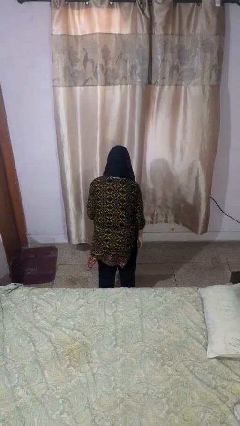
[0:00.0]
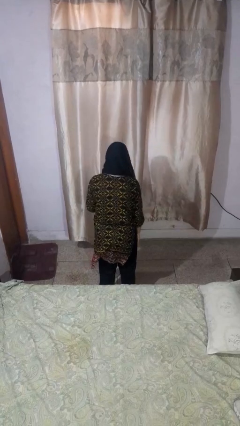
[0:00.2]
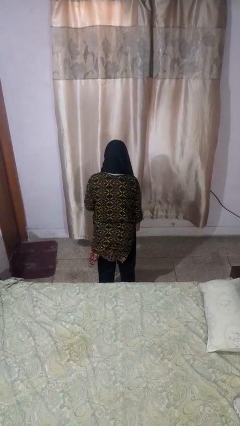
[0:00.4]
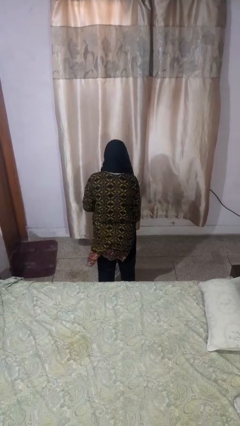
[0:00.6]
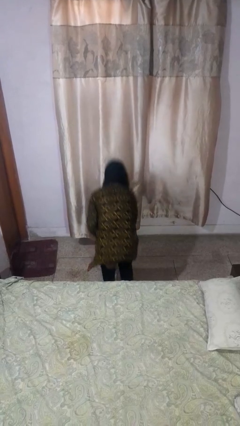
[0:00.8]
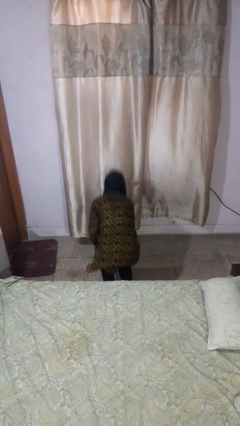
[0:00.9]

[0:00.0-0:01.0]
person picks up object from floor

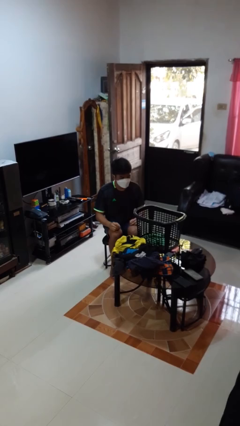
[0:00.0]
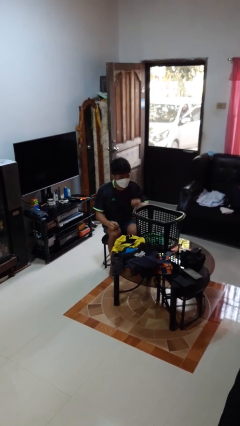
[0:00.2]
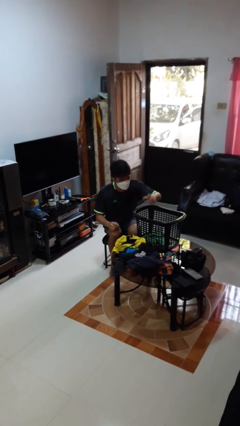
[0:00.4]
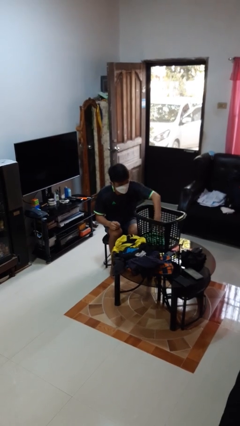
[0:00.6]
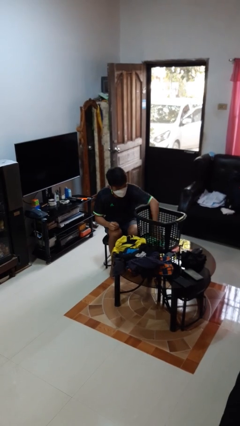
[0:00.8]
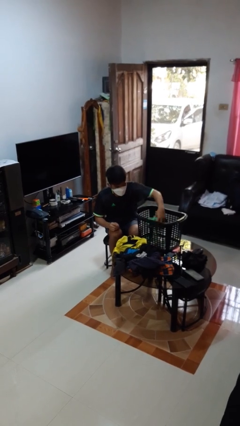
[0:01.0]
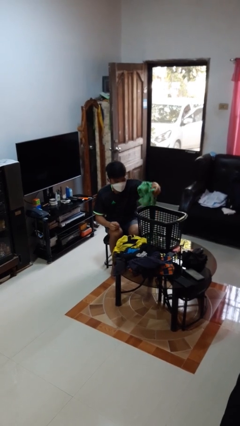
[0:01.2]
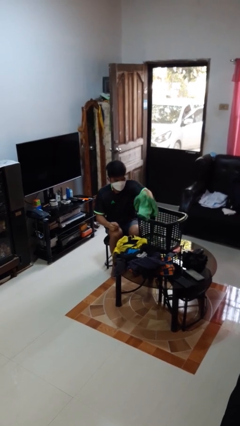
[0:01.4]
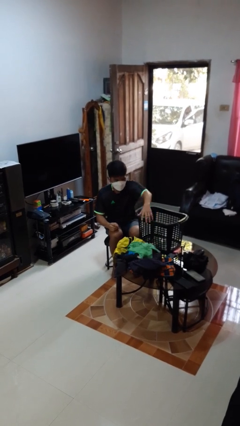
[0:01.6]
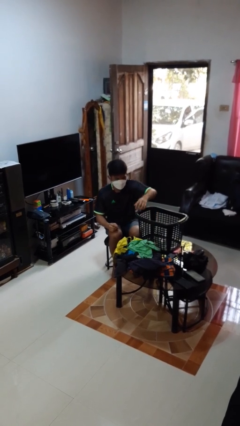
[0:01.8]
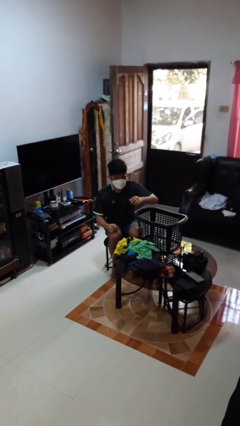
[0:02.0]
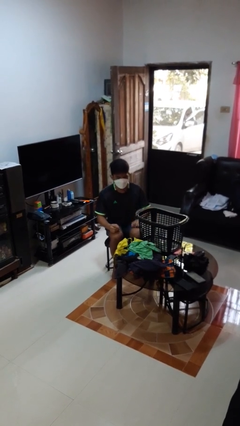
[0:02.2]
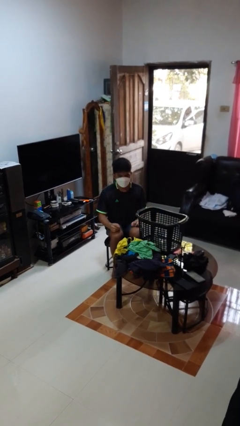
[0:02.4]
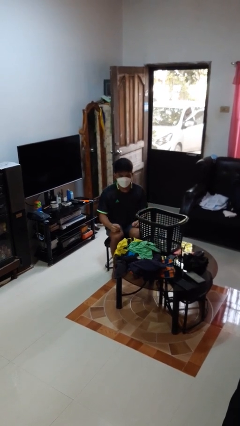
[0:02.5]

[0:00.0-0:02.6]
person takes object from basket

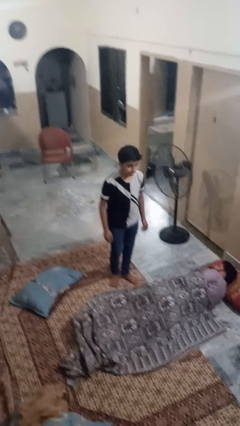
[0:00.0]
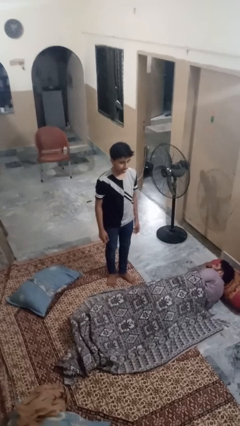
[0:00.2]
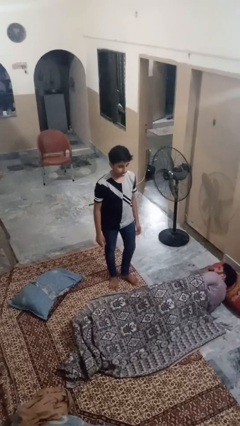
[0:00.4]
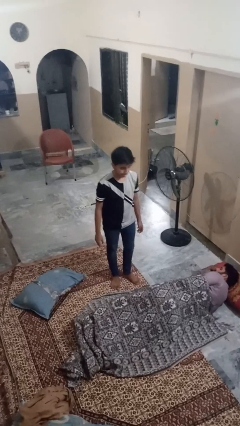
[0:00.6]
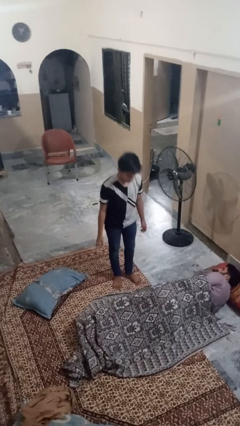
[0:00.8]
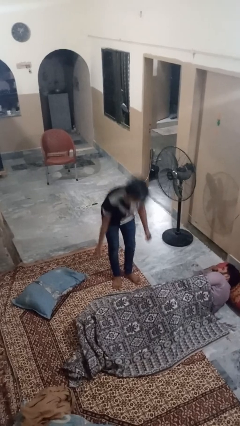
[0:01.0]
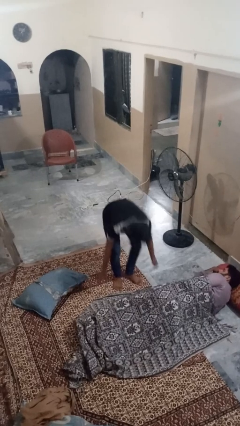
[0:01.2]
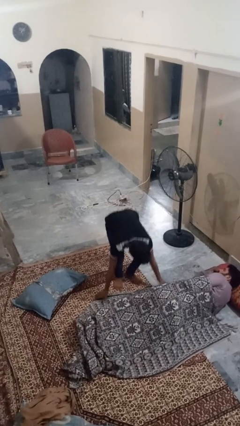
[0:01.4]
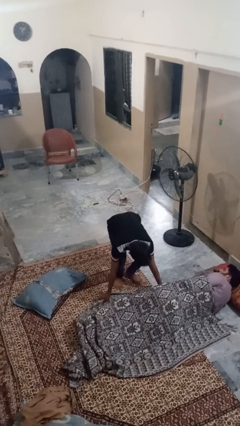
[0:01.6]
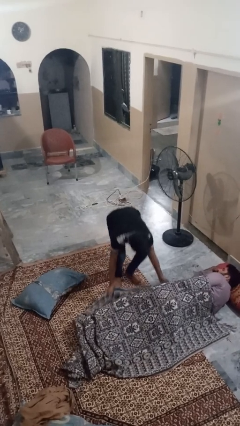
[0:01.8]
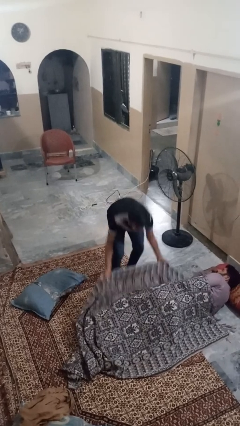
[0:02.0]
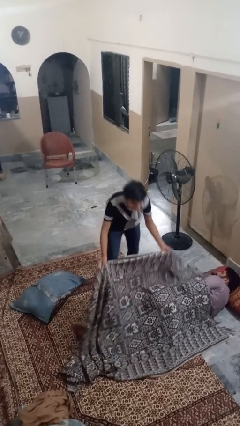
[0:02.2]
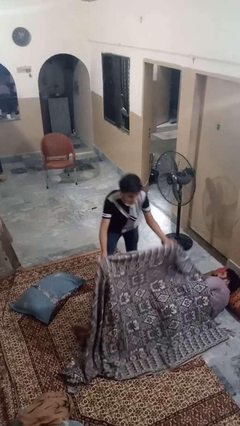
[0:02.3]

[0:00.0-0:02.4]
person uncovers friend with blanket

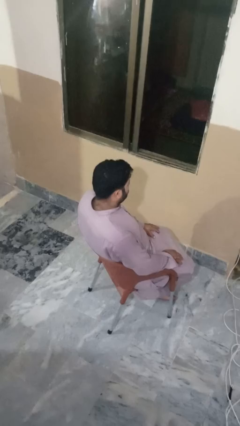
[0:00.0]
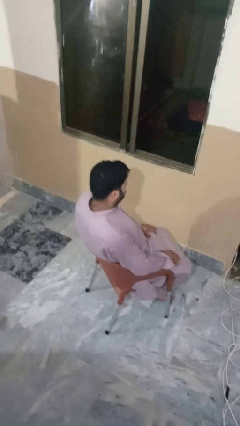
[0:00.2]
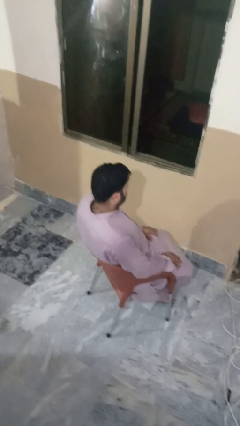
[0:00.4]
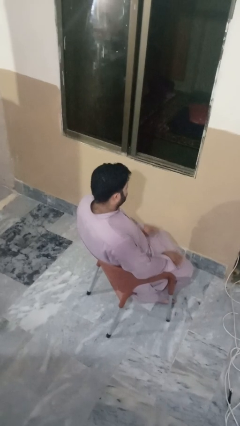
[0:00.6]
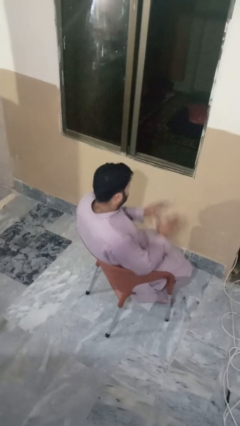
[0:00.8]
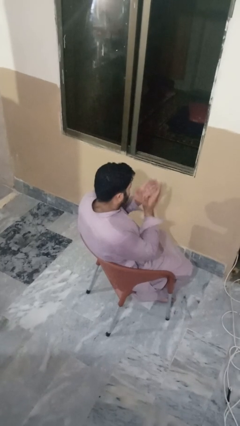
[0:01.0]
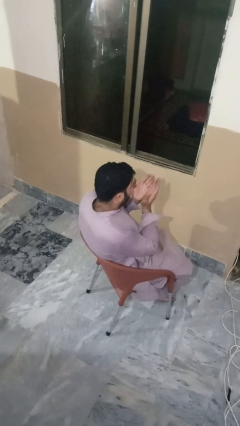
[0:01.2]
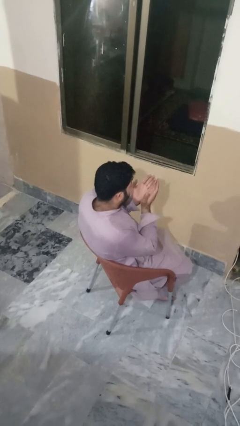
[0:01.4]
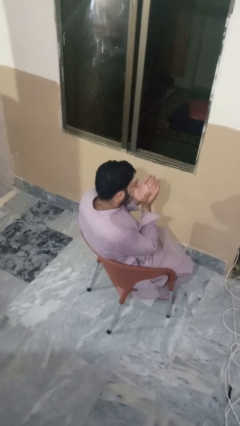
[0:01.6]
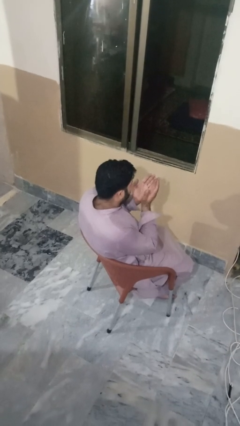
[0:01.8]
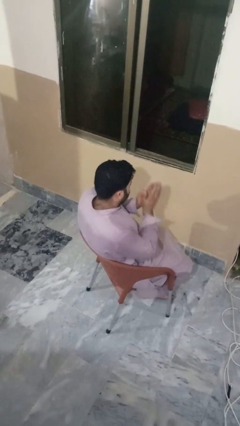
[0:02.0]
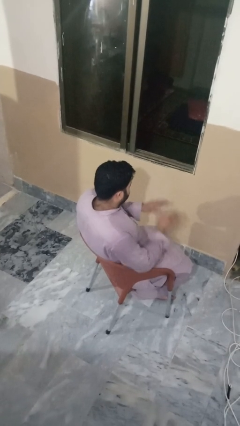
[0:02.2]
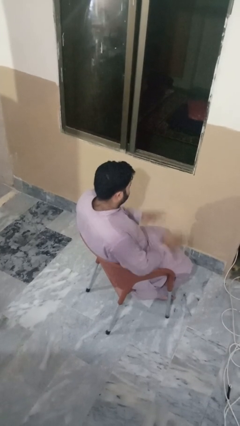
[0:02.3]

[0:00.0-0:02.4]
person prays

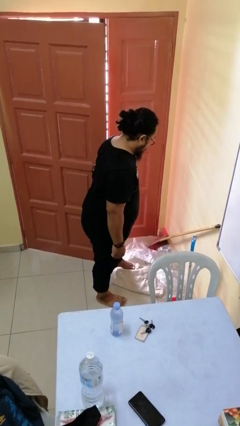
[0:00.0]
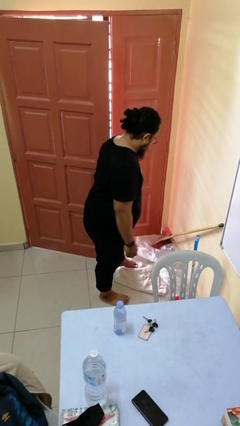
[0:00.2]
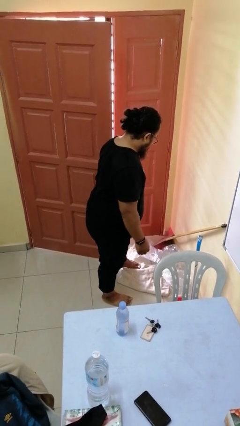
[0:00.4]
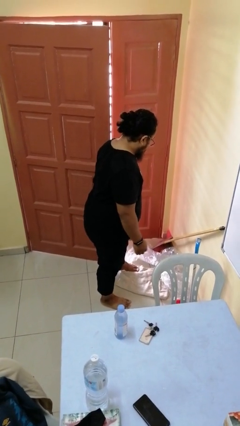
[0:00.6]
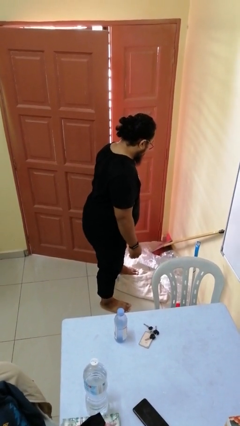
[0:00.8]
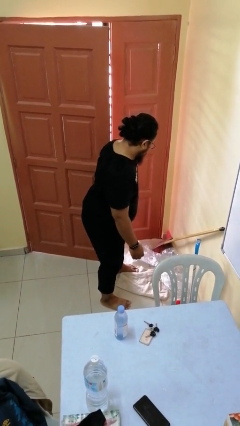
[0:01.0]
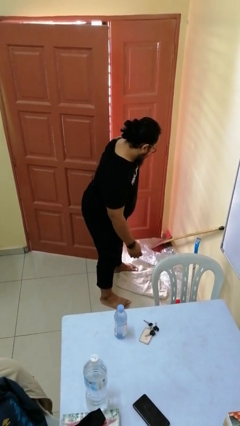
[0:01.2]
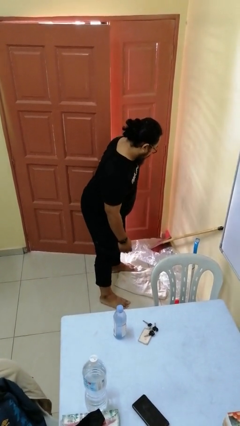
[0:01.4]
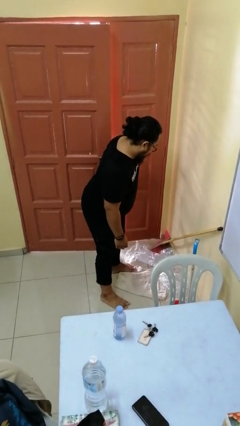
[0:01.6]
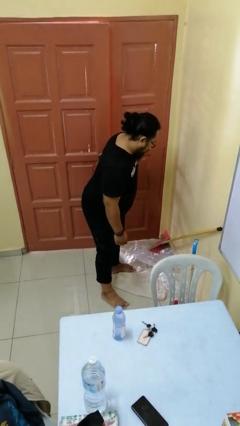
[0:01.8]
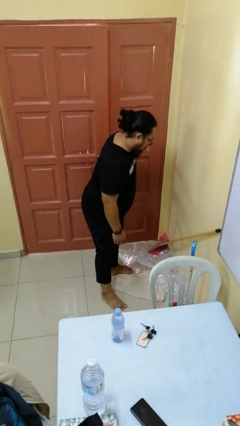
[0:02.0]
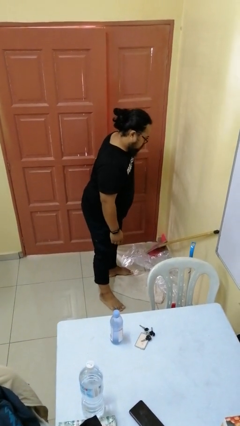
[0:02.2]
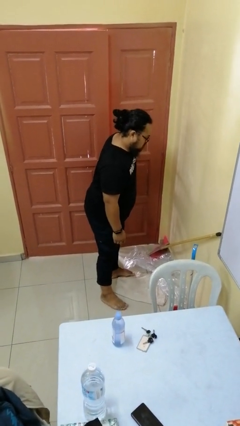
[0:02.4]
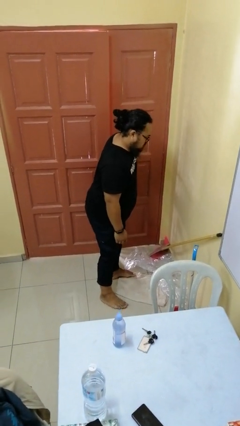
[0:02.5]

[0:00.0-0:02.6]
person closes door with hip

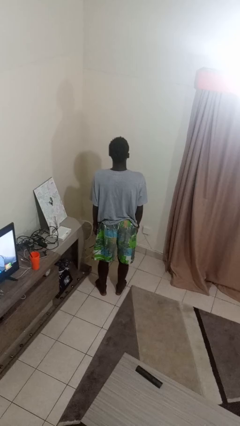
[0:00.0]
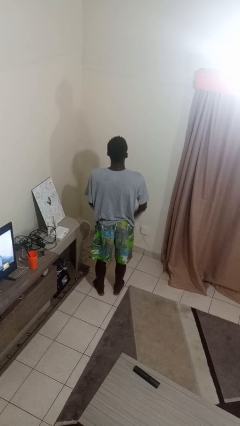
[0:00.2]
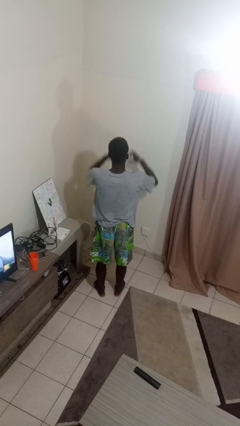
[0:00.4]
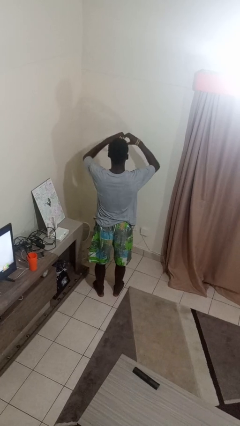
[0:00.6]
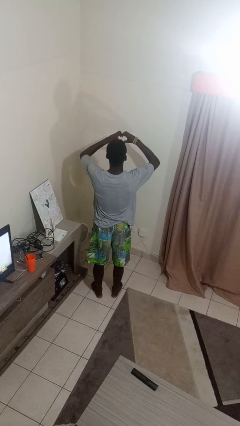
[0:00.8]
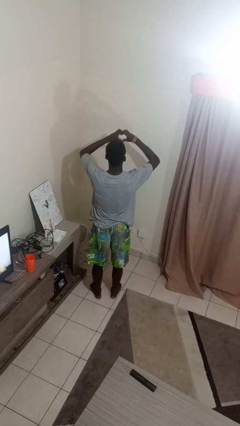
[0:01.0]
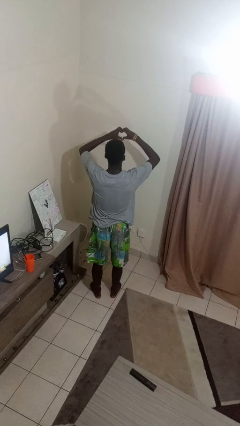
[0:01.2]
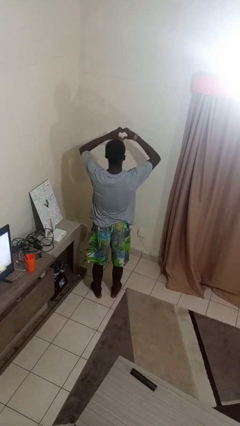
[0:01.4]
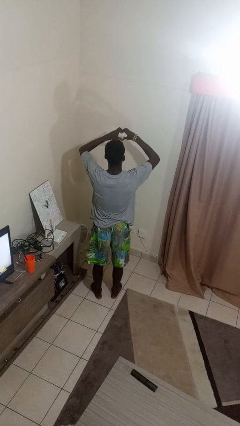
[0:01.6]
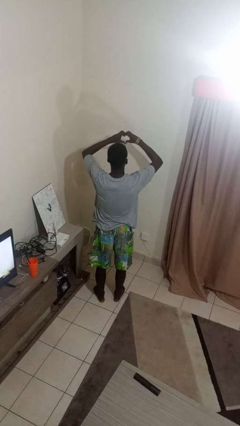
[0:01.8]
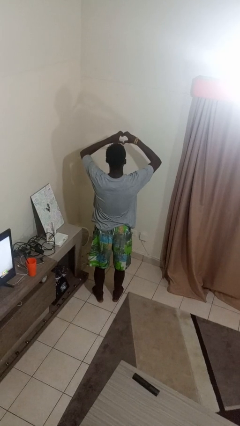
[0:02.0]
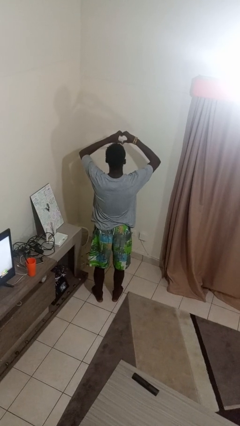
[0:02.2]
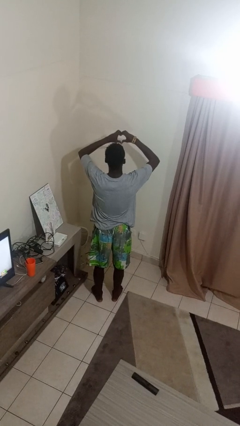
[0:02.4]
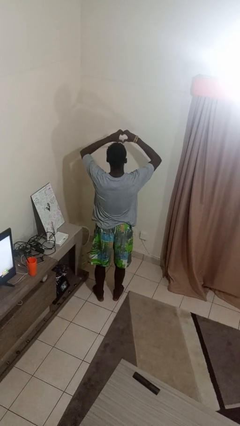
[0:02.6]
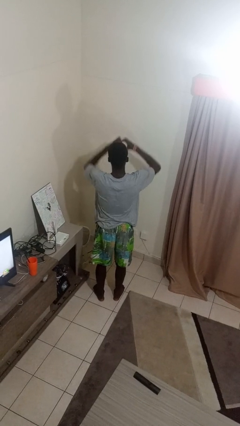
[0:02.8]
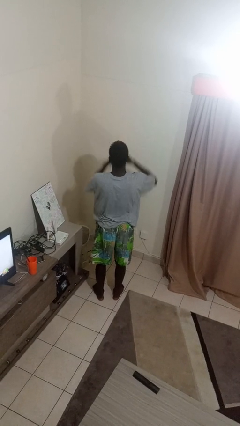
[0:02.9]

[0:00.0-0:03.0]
person gestures heart

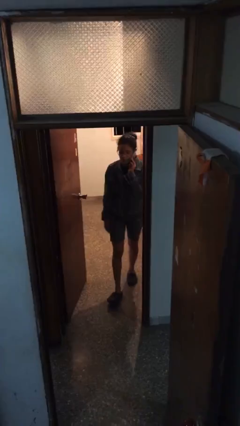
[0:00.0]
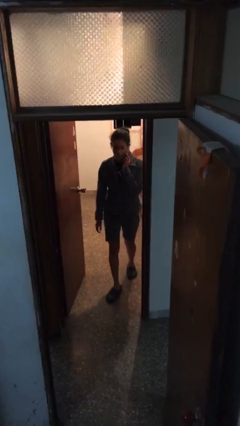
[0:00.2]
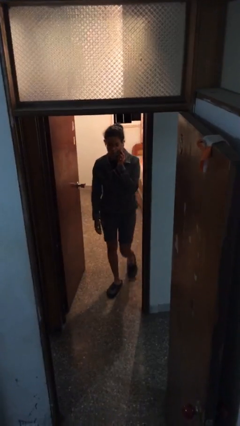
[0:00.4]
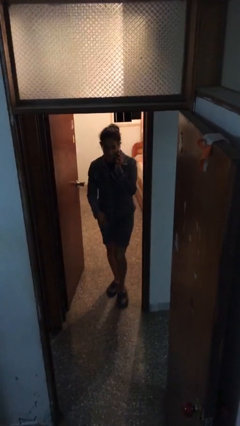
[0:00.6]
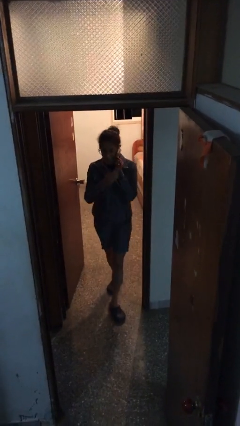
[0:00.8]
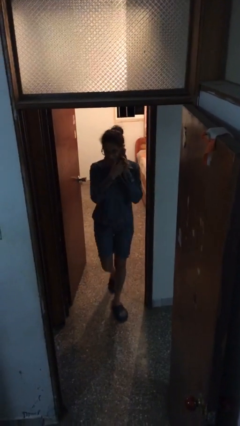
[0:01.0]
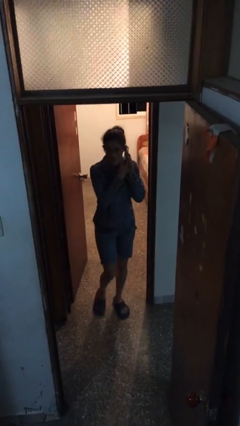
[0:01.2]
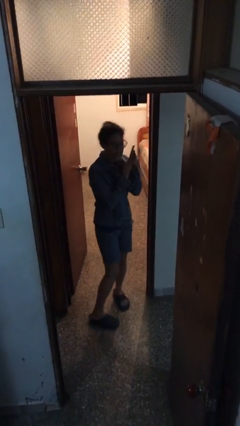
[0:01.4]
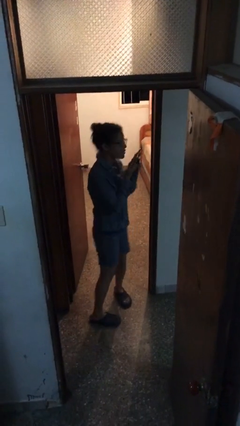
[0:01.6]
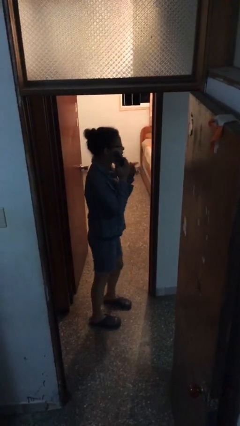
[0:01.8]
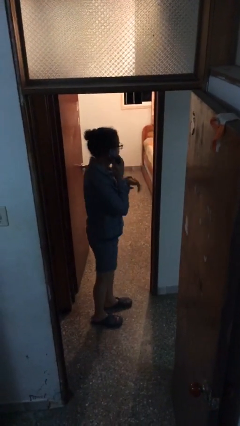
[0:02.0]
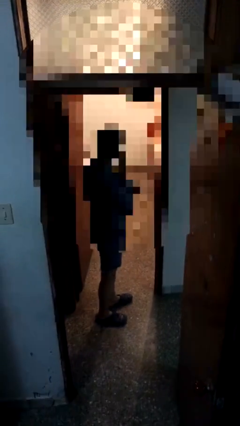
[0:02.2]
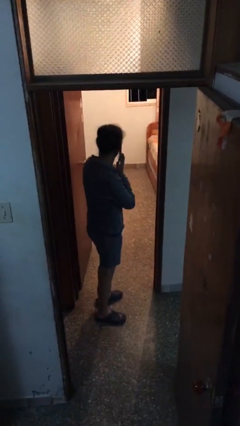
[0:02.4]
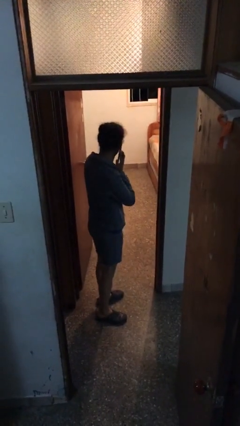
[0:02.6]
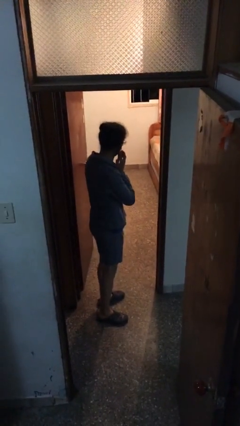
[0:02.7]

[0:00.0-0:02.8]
person enters scene through structure

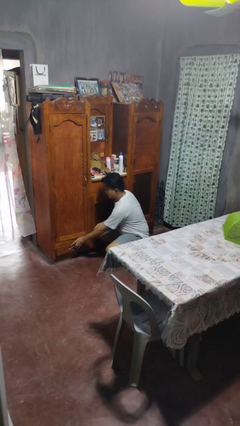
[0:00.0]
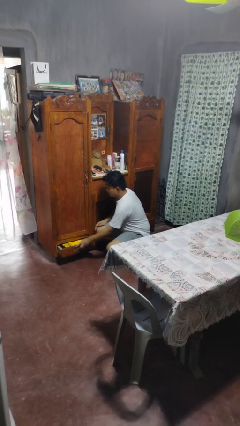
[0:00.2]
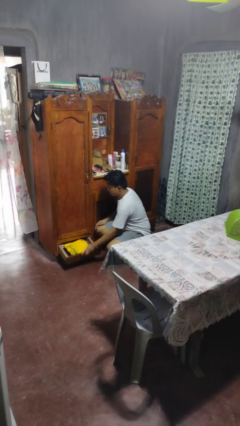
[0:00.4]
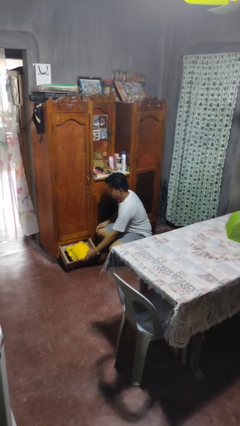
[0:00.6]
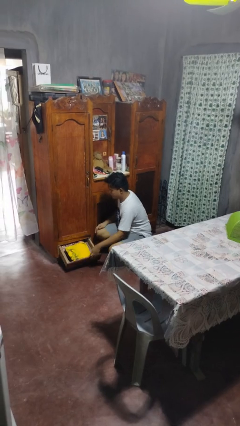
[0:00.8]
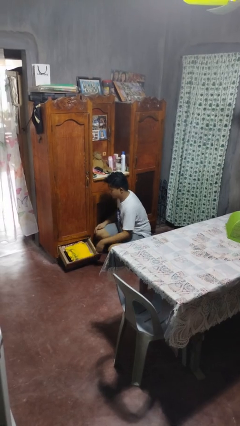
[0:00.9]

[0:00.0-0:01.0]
person opens dresser drawer
